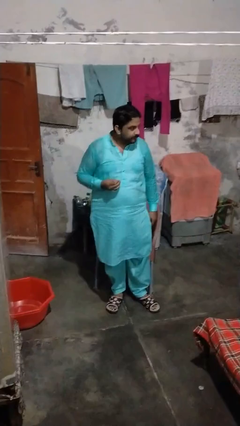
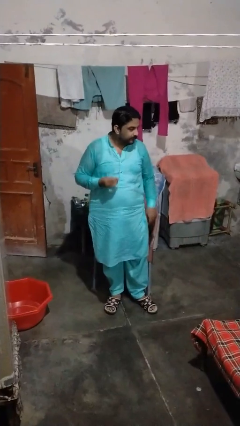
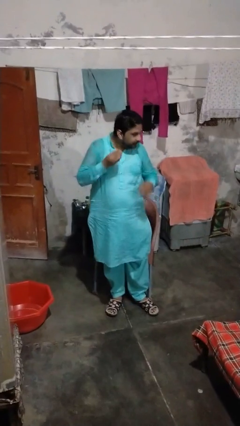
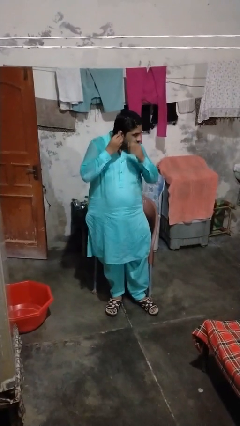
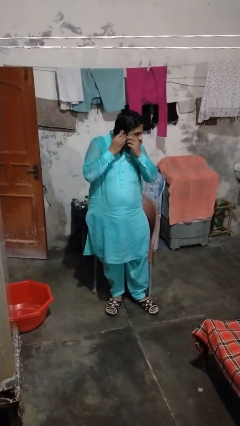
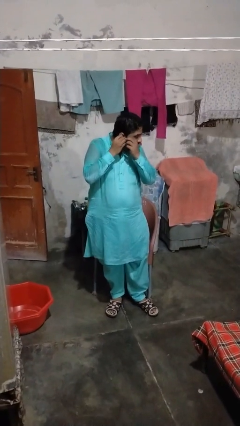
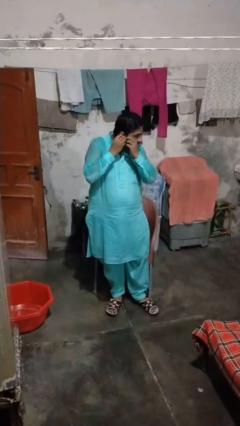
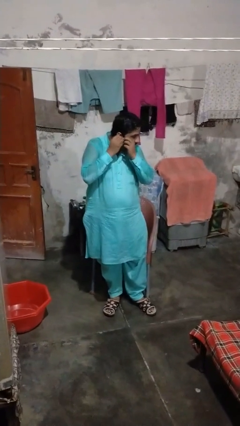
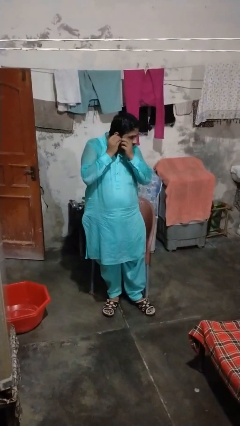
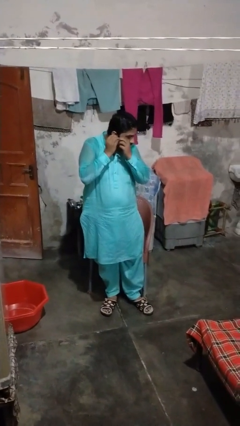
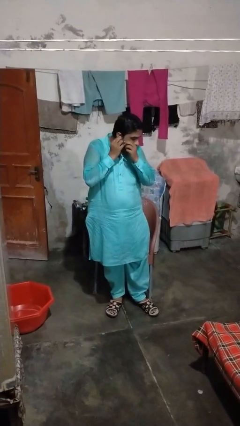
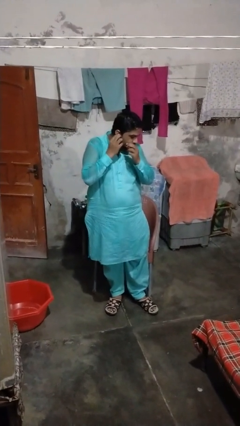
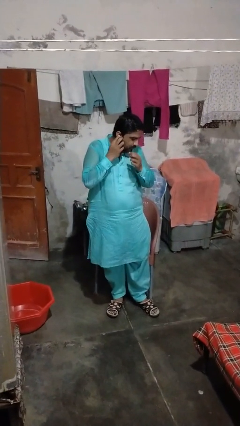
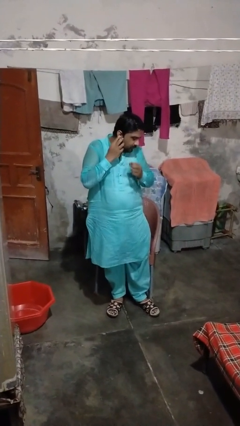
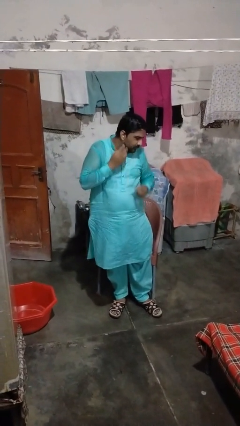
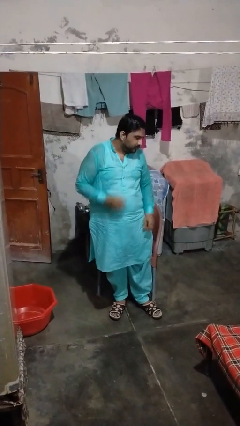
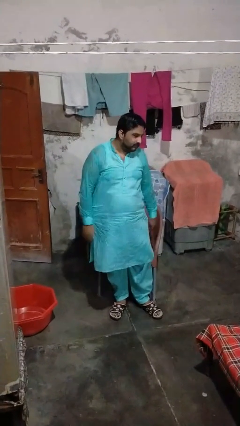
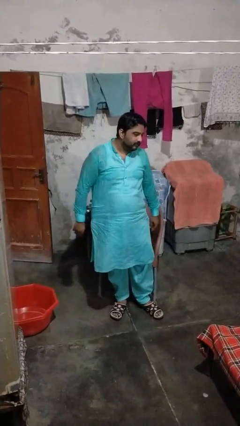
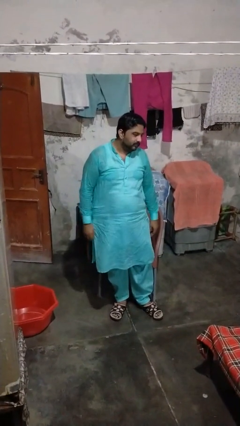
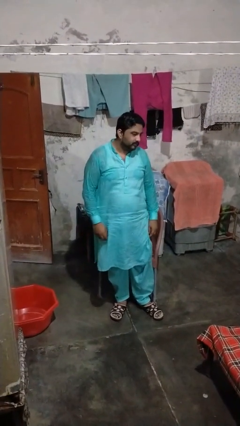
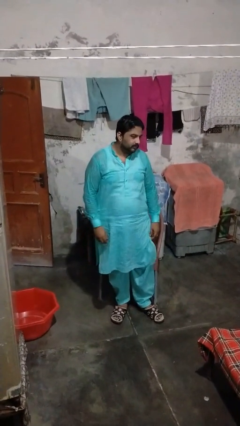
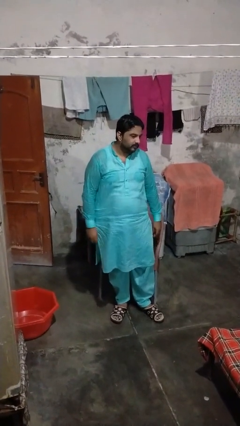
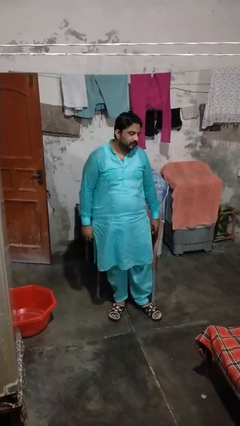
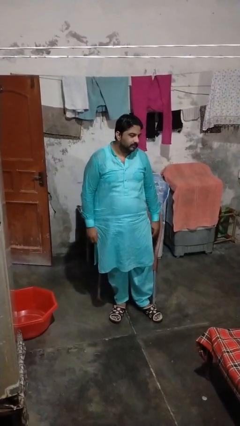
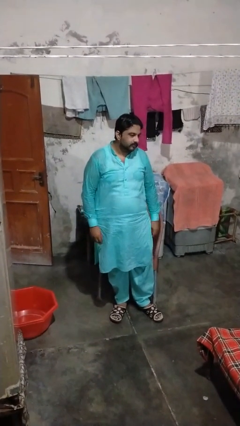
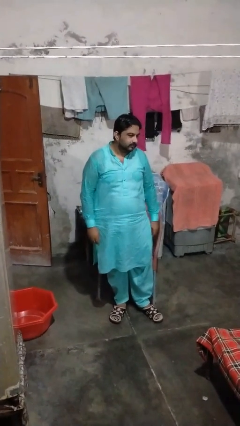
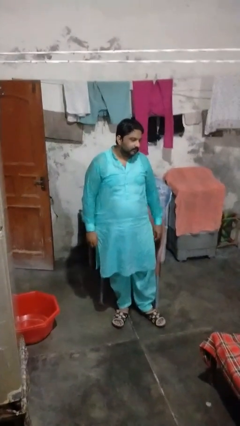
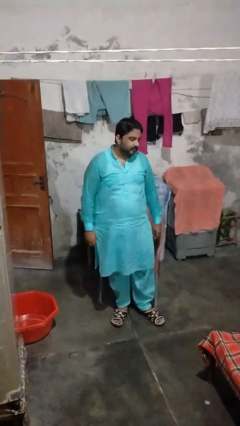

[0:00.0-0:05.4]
person puts on earrings

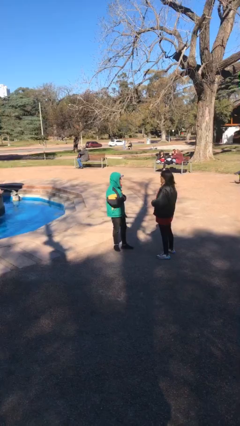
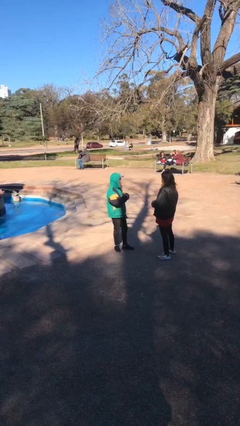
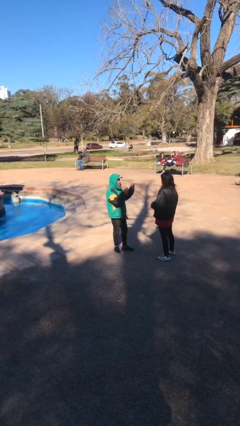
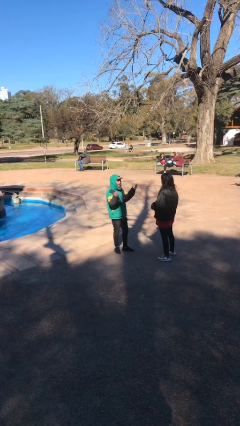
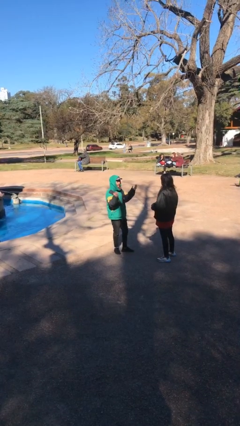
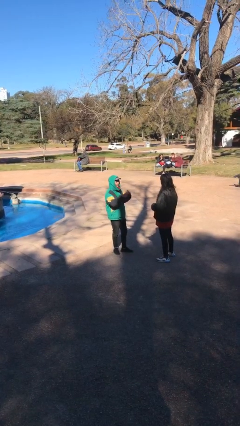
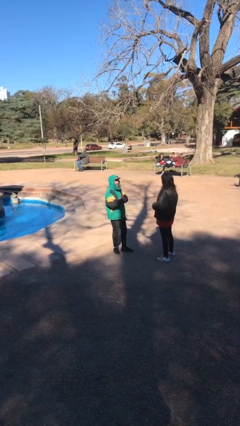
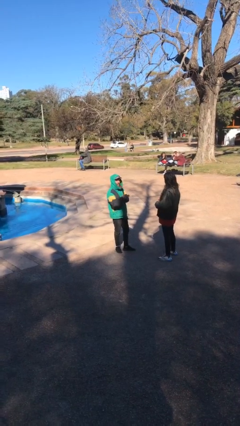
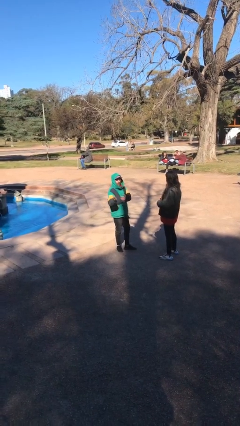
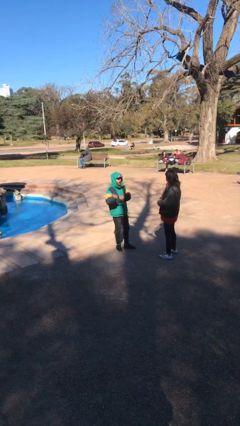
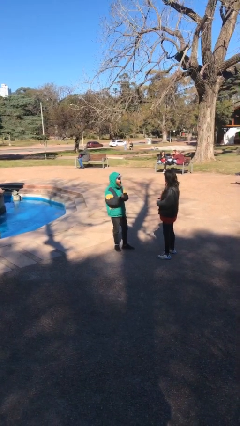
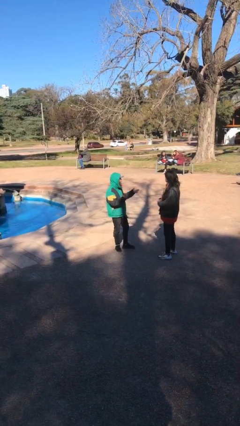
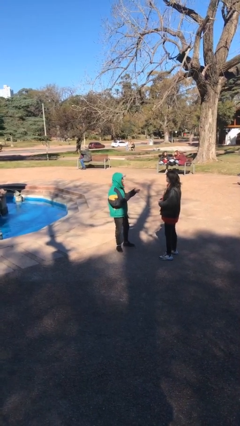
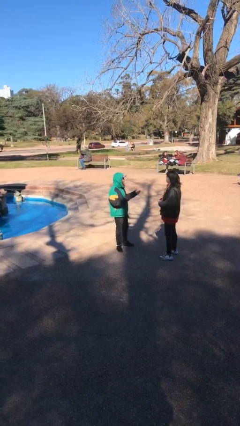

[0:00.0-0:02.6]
person talks to person

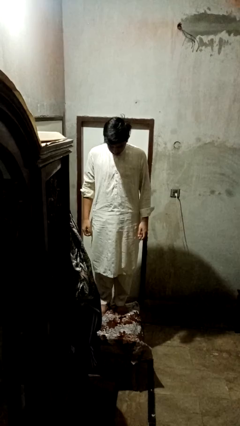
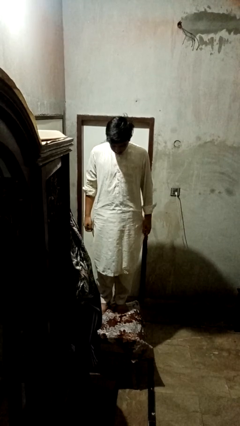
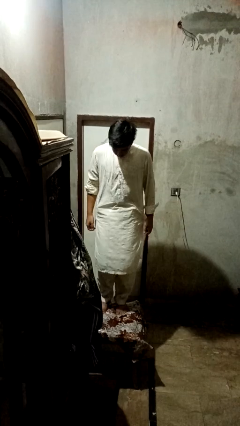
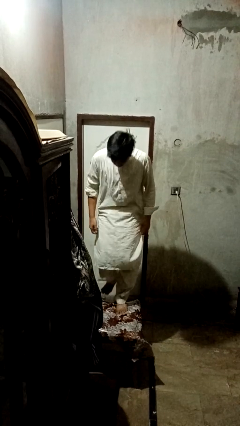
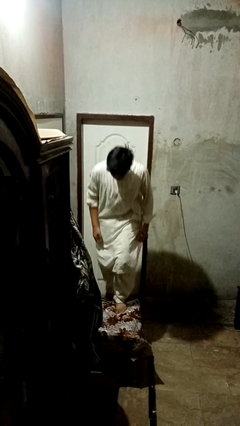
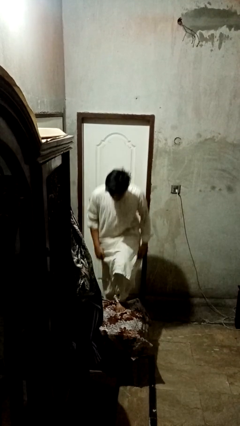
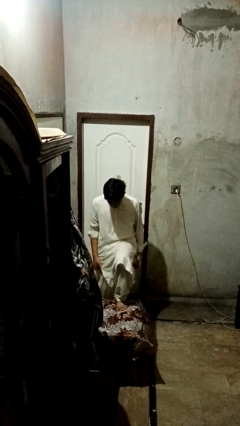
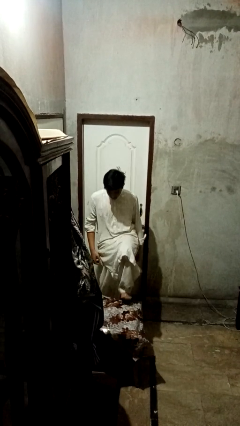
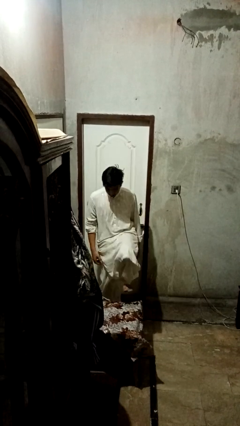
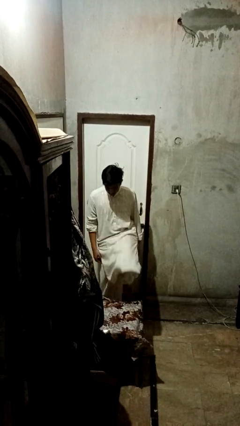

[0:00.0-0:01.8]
person climbs off table

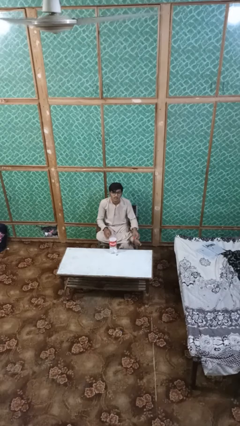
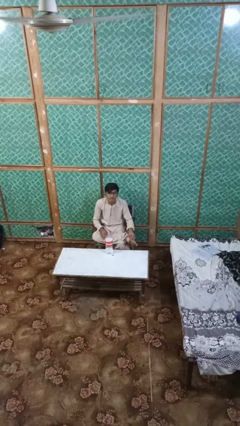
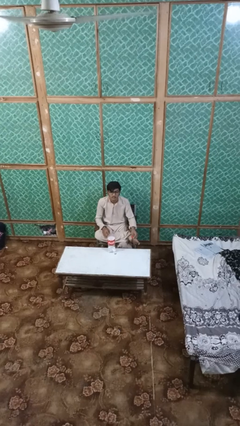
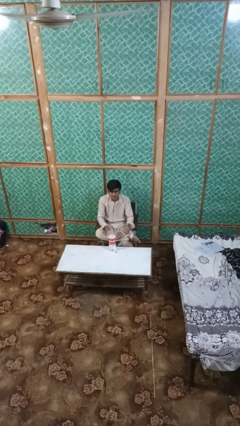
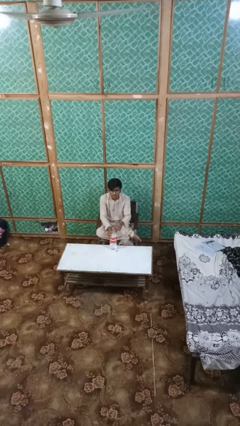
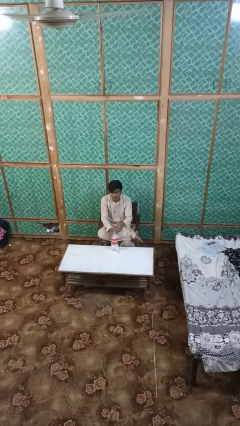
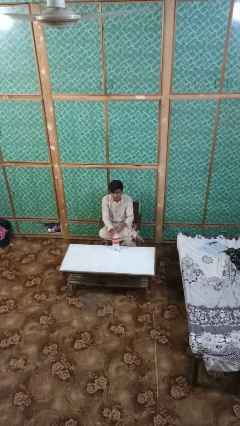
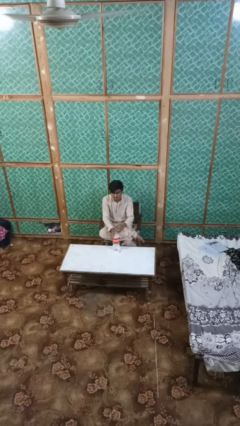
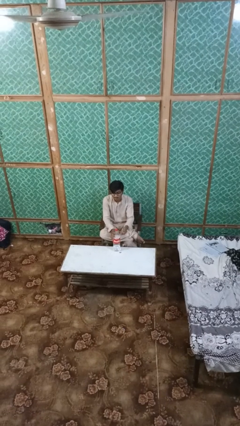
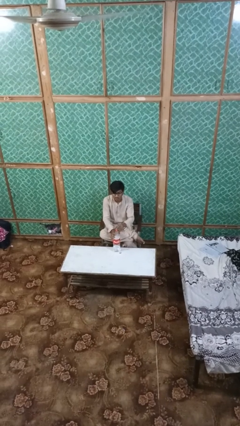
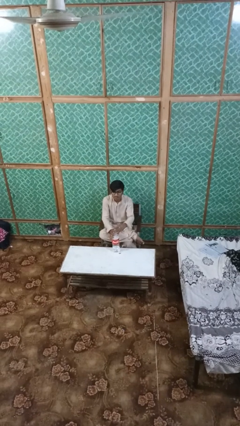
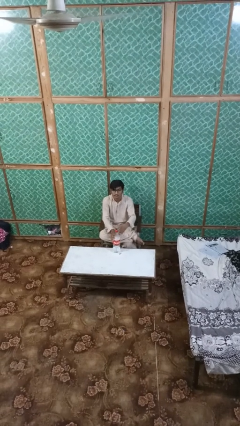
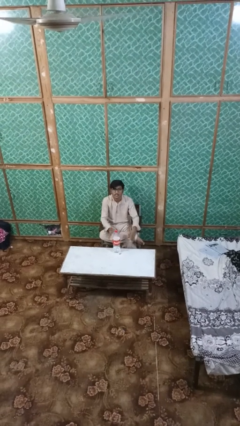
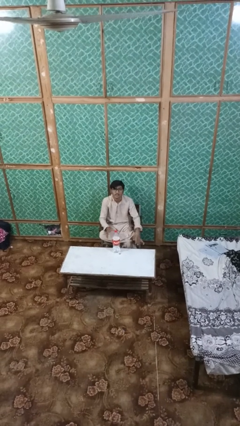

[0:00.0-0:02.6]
person screws lid to bottle

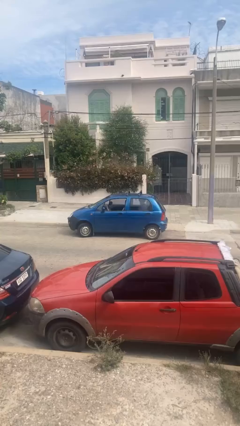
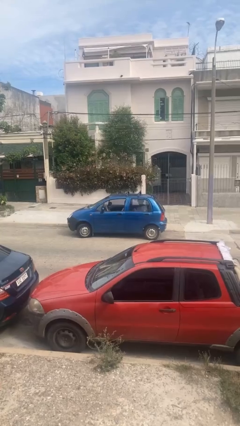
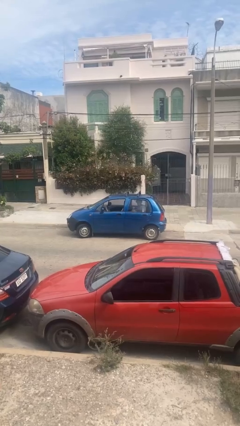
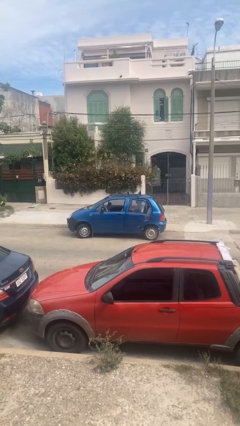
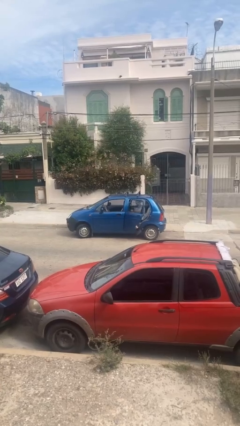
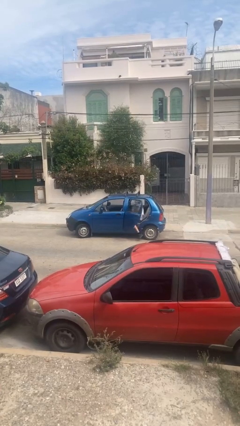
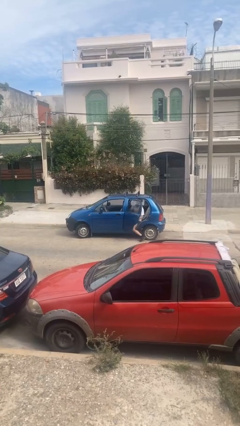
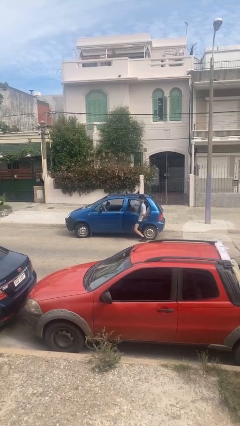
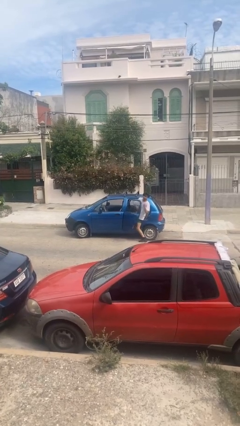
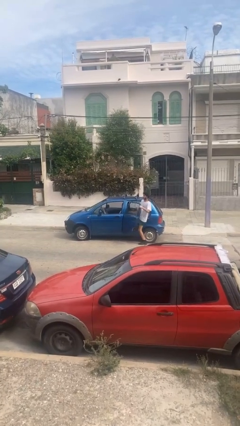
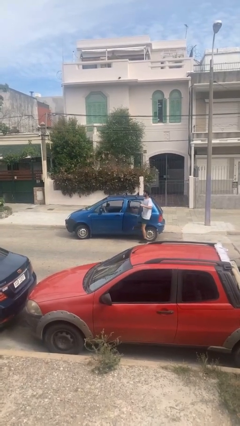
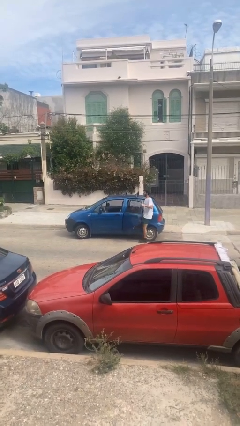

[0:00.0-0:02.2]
car drops off person

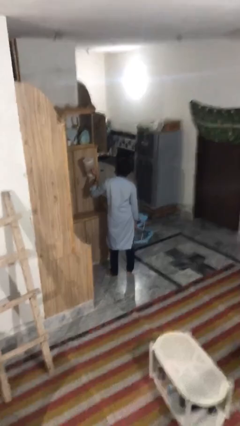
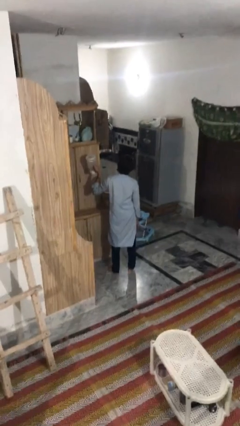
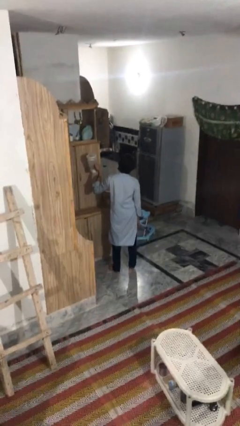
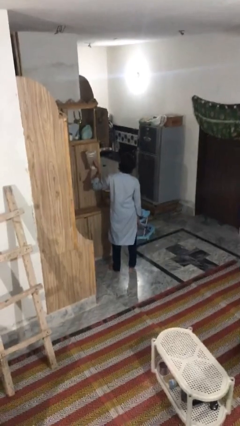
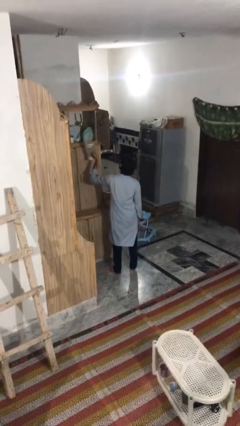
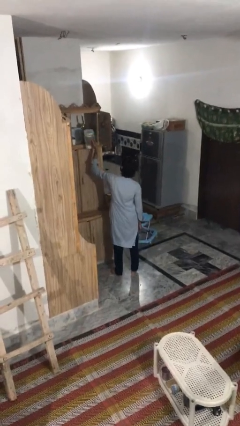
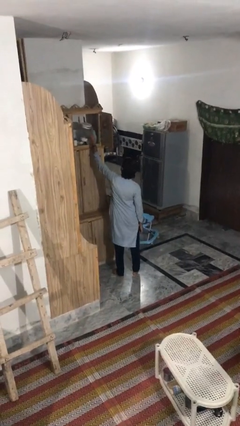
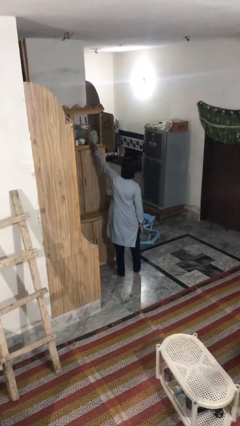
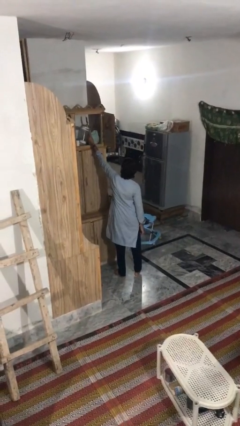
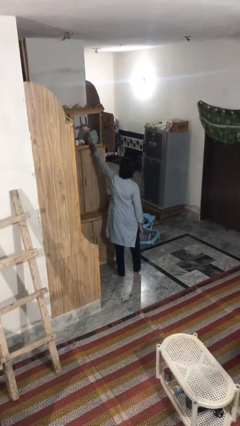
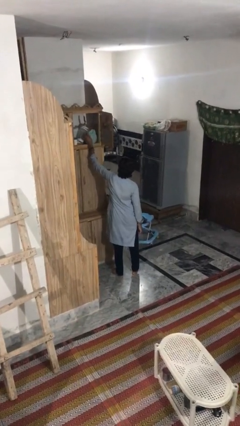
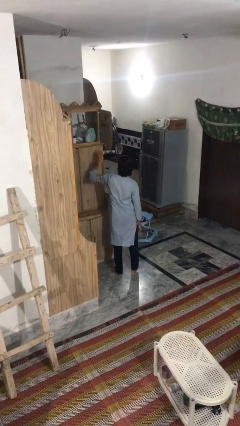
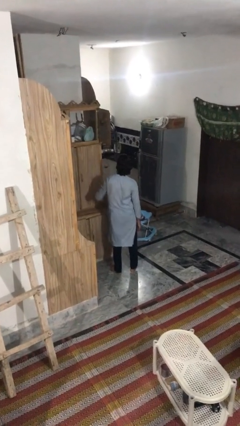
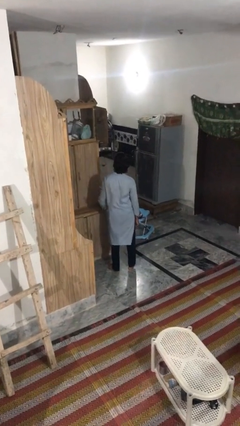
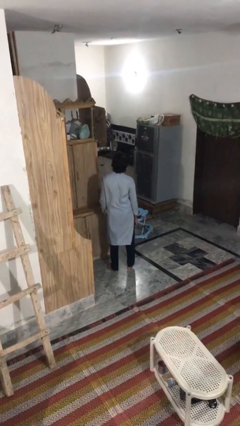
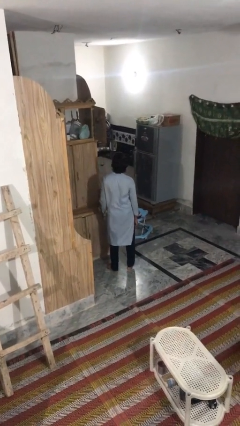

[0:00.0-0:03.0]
person puts down object on shelf
